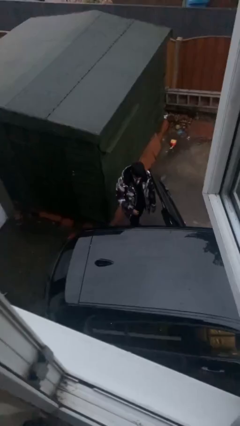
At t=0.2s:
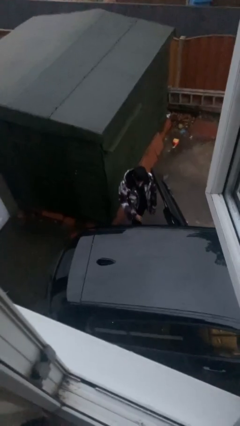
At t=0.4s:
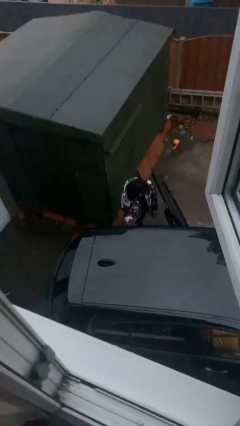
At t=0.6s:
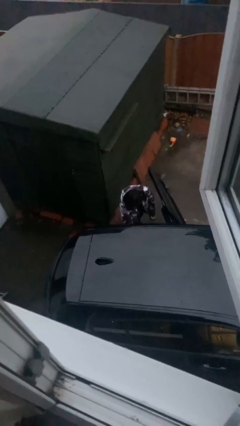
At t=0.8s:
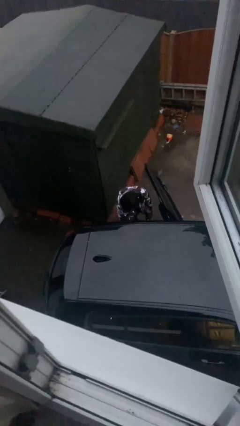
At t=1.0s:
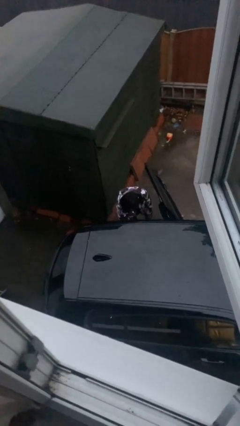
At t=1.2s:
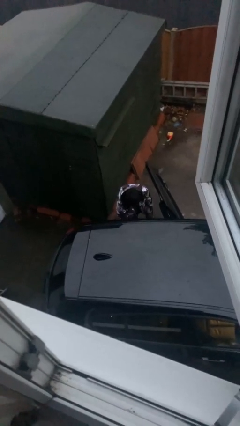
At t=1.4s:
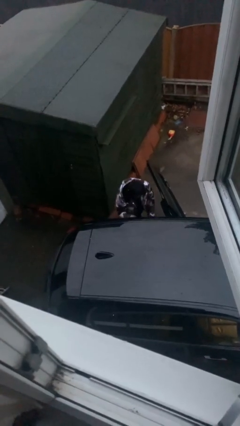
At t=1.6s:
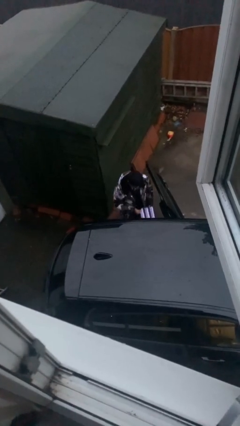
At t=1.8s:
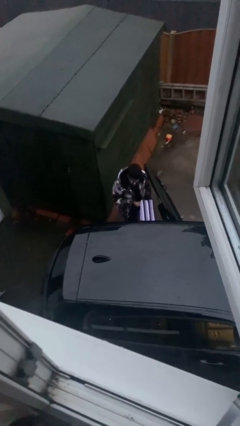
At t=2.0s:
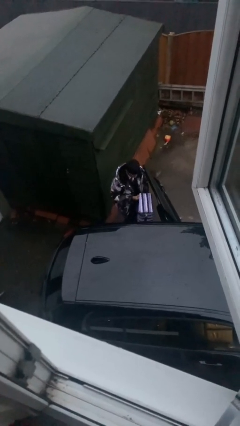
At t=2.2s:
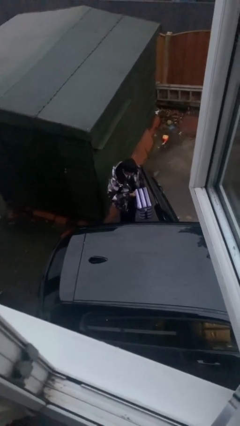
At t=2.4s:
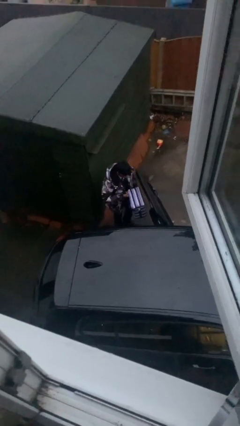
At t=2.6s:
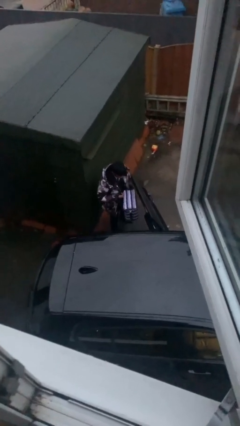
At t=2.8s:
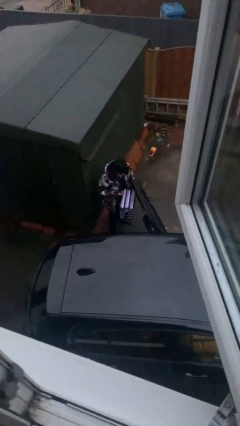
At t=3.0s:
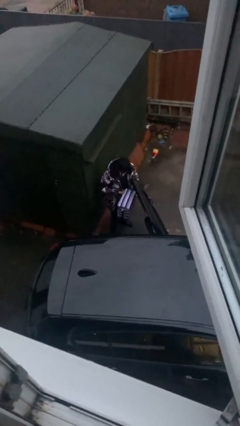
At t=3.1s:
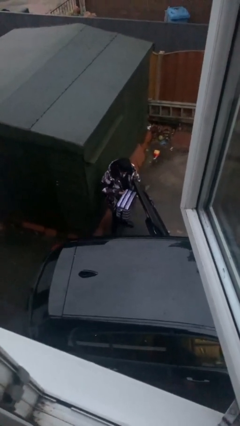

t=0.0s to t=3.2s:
person unloads car

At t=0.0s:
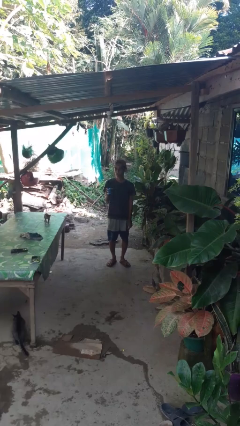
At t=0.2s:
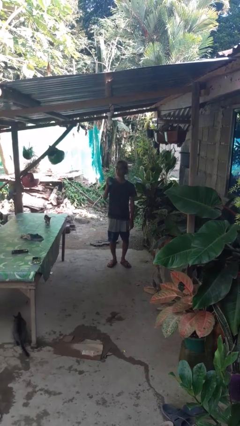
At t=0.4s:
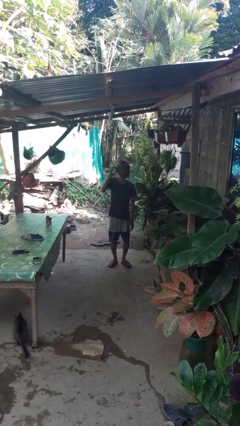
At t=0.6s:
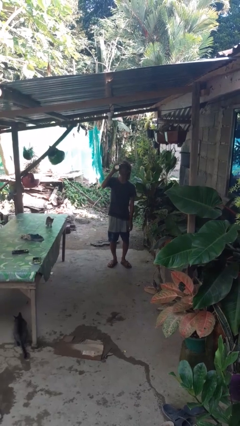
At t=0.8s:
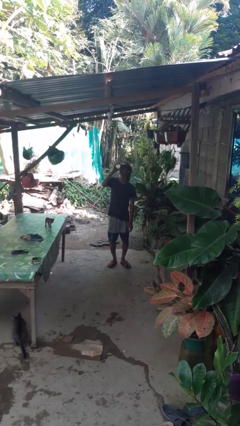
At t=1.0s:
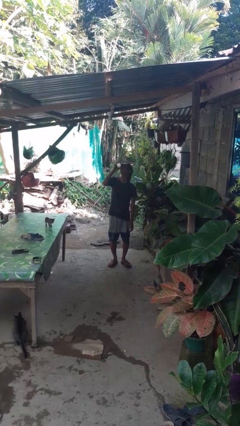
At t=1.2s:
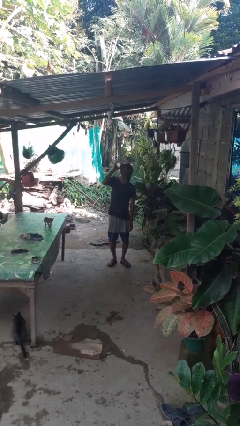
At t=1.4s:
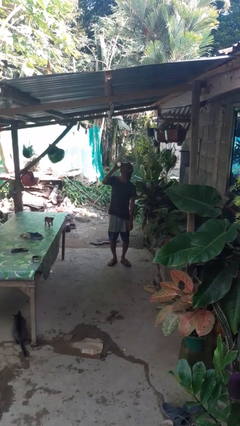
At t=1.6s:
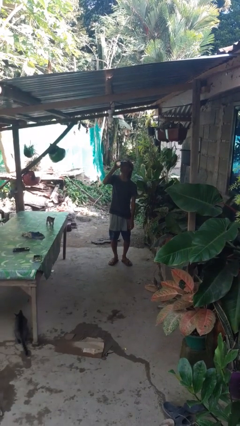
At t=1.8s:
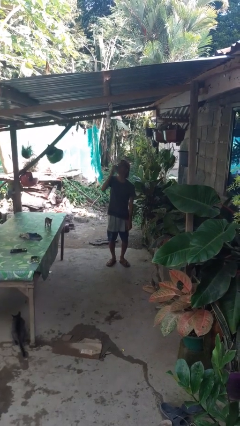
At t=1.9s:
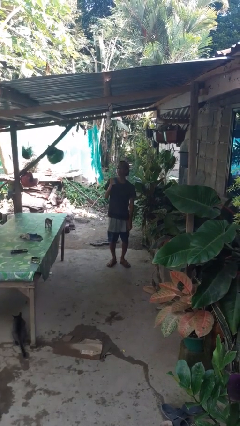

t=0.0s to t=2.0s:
person drinks from beverage can

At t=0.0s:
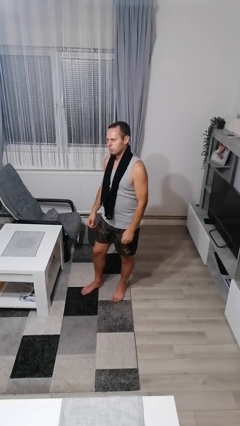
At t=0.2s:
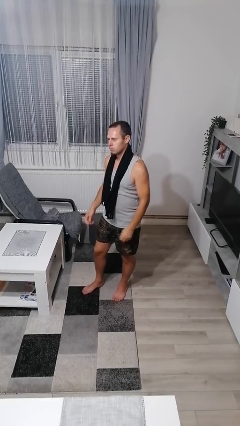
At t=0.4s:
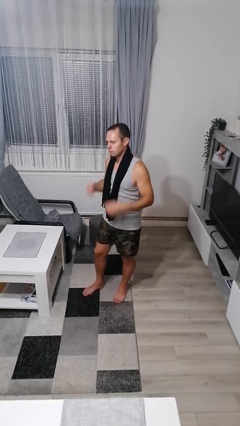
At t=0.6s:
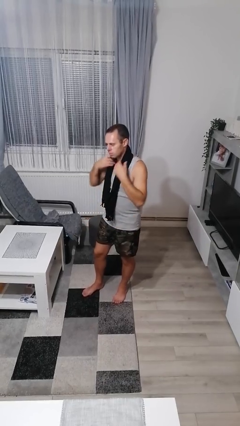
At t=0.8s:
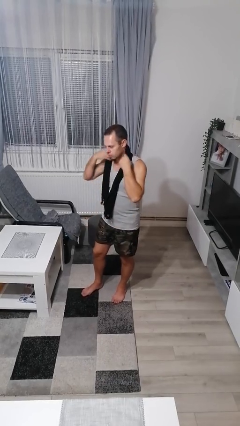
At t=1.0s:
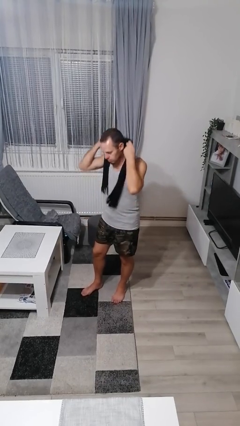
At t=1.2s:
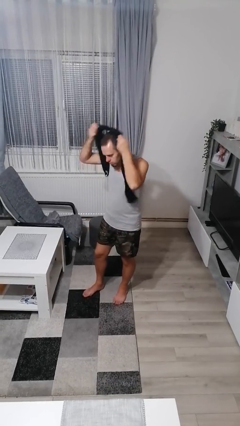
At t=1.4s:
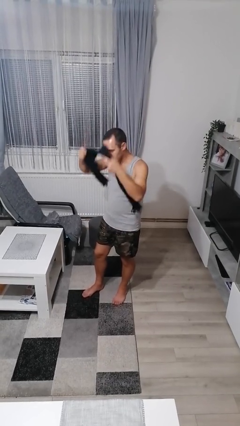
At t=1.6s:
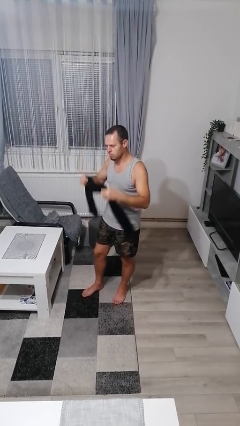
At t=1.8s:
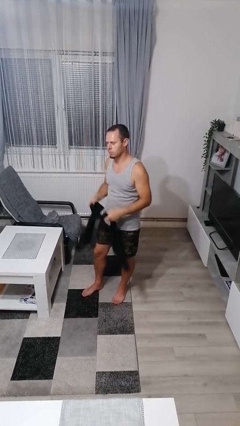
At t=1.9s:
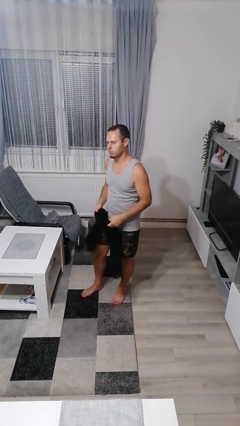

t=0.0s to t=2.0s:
person takes off scarf

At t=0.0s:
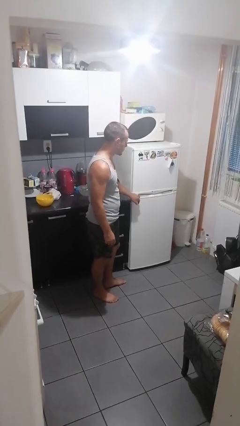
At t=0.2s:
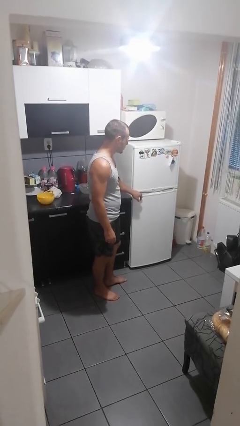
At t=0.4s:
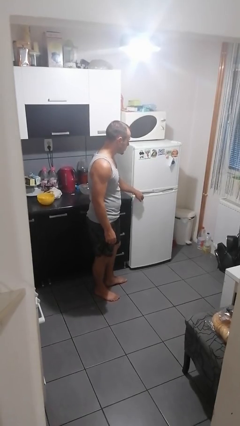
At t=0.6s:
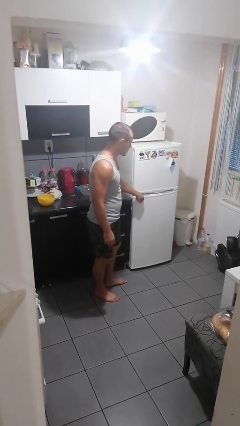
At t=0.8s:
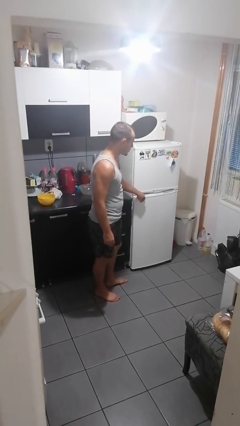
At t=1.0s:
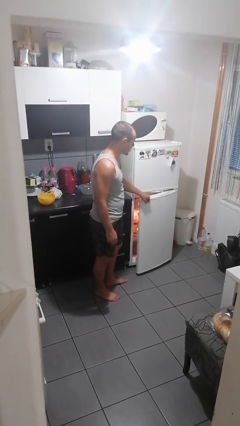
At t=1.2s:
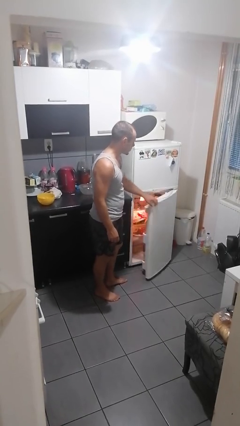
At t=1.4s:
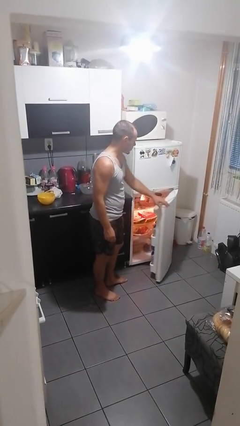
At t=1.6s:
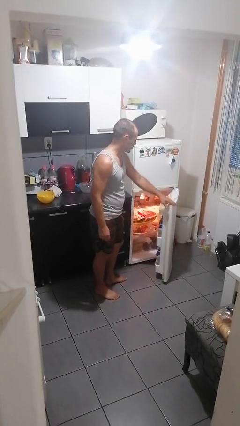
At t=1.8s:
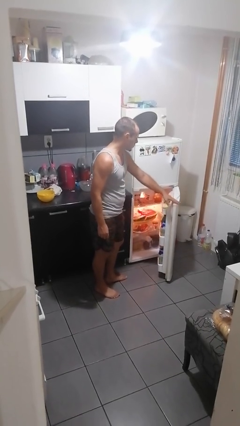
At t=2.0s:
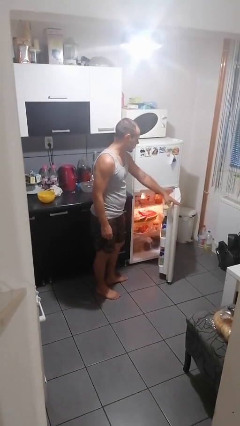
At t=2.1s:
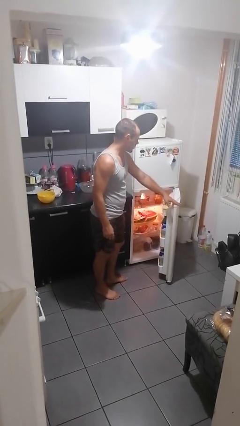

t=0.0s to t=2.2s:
person opens refrigerator

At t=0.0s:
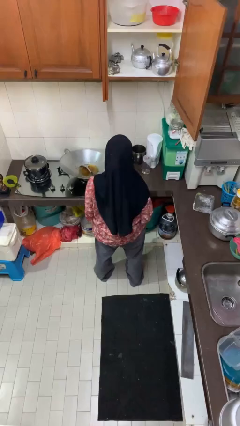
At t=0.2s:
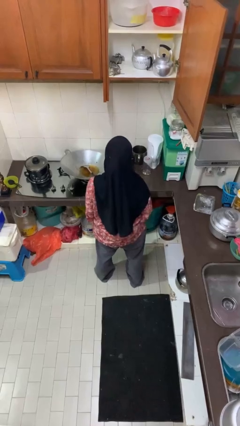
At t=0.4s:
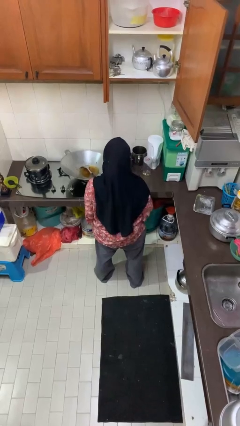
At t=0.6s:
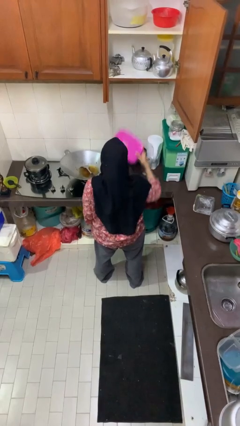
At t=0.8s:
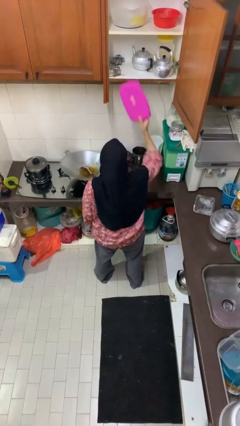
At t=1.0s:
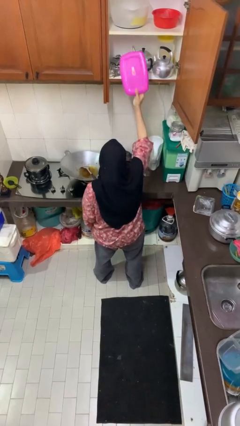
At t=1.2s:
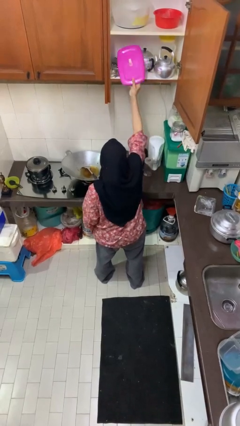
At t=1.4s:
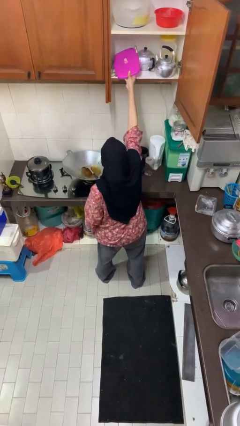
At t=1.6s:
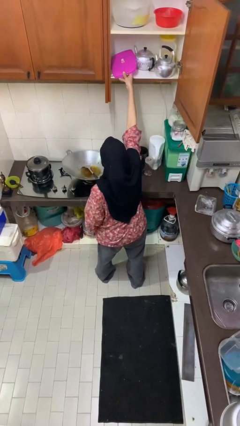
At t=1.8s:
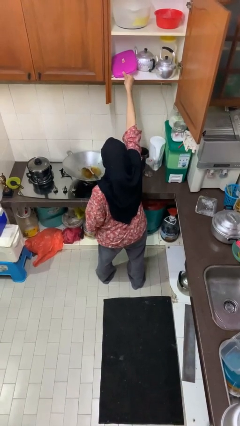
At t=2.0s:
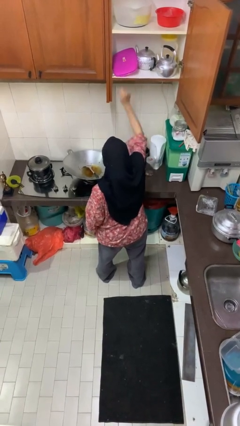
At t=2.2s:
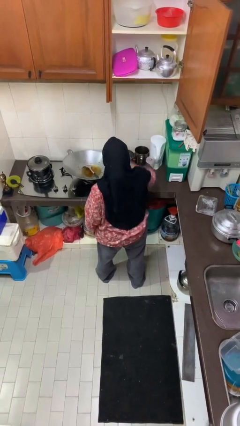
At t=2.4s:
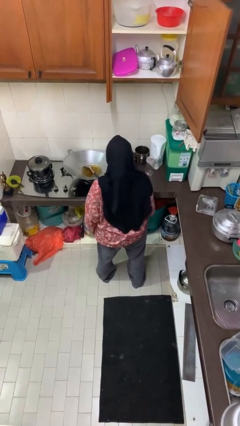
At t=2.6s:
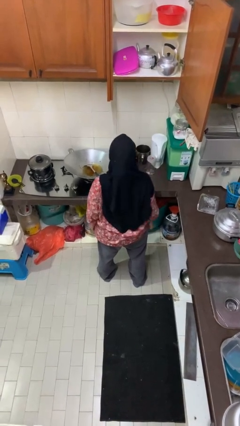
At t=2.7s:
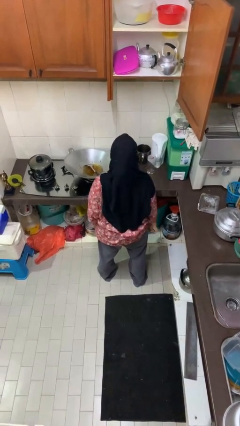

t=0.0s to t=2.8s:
person puts object in cabinet

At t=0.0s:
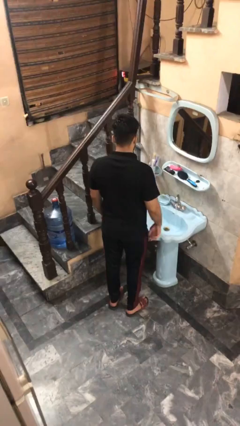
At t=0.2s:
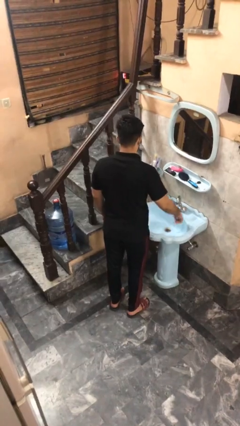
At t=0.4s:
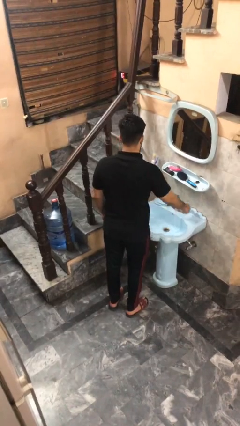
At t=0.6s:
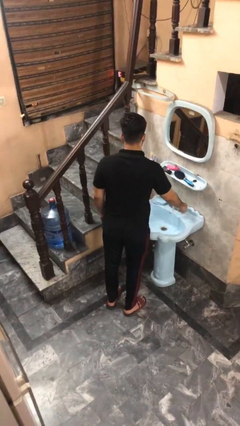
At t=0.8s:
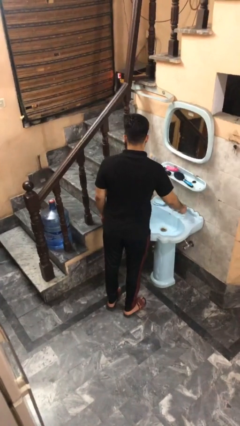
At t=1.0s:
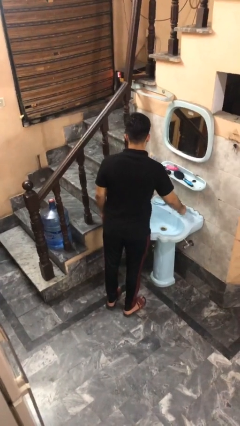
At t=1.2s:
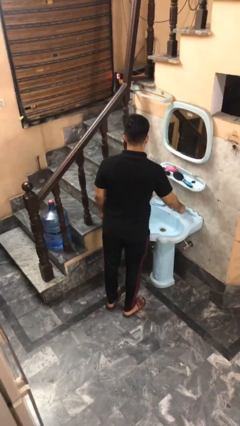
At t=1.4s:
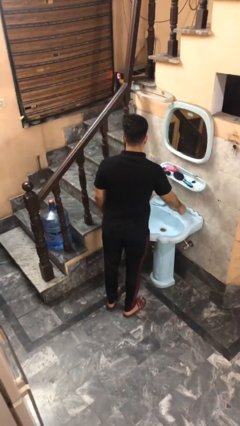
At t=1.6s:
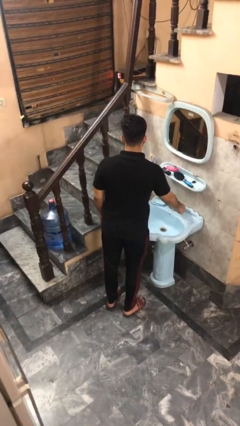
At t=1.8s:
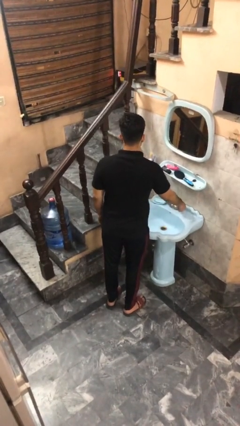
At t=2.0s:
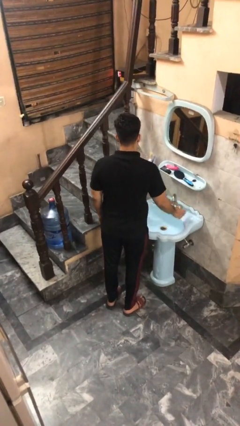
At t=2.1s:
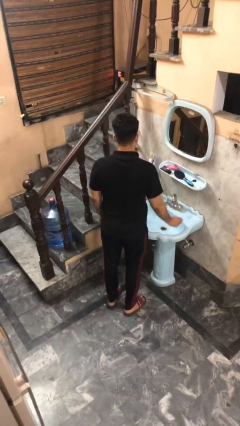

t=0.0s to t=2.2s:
person turns off faucet

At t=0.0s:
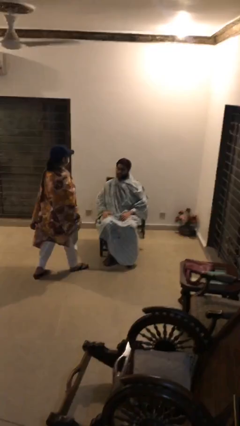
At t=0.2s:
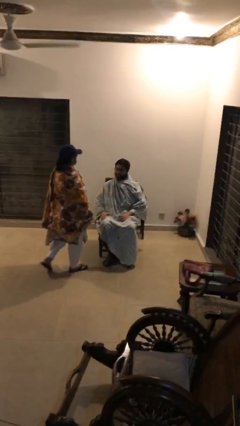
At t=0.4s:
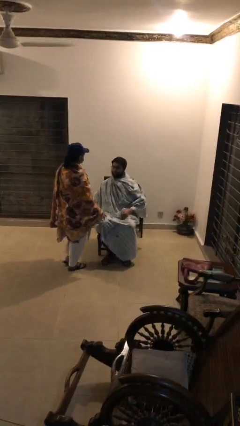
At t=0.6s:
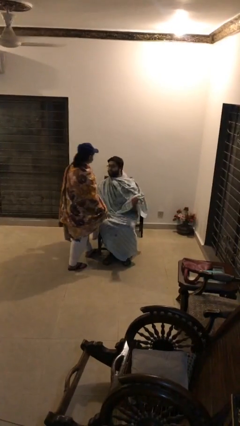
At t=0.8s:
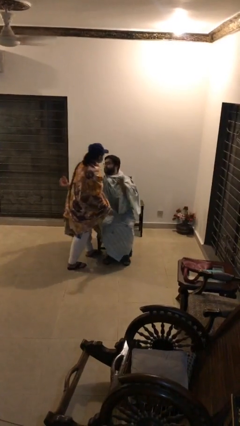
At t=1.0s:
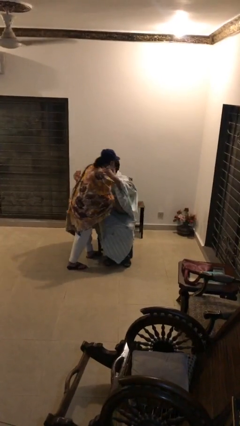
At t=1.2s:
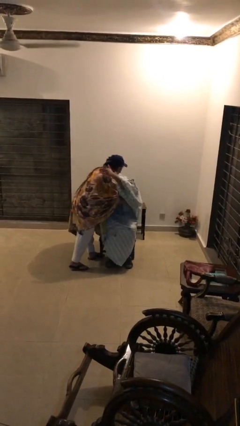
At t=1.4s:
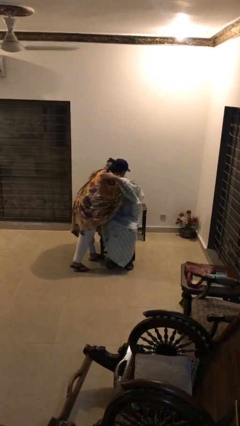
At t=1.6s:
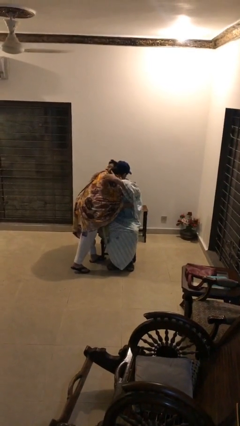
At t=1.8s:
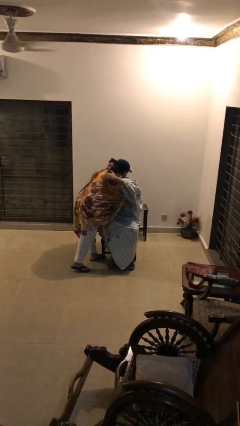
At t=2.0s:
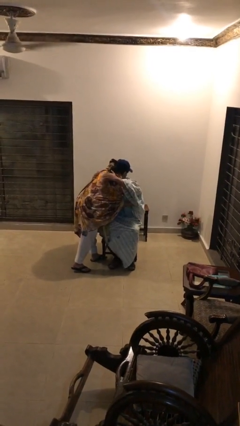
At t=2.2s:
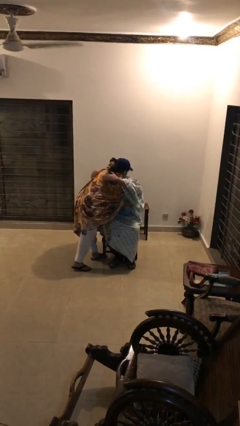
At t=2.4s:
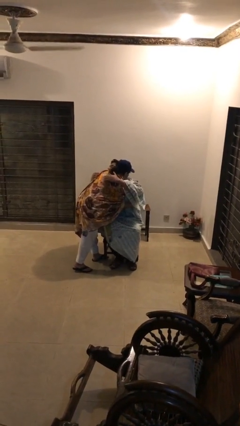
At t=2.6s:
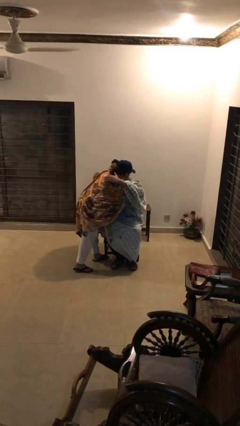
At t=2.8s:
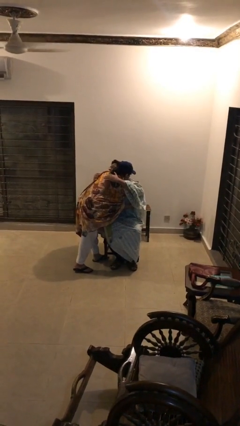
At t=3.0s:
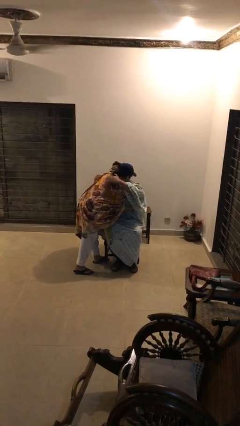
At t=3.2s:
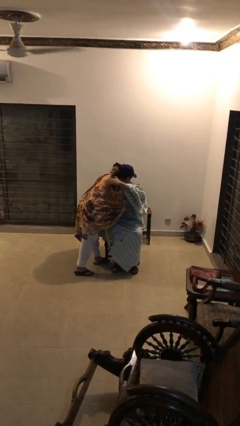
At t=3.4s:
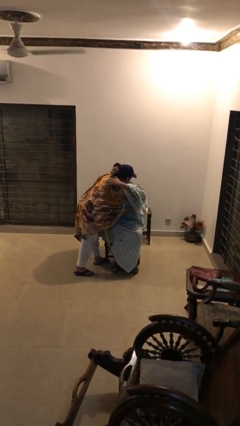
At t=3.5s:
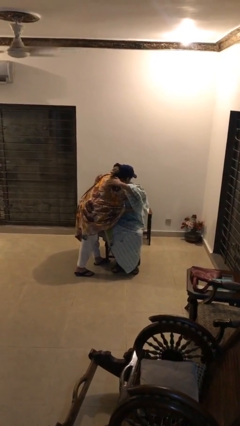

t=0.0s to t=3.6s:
person embraces person
